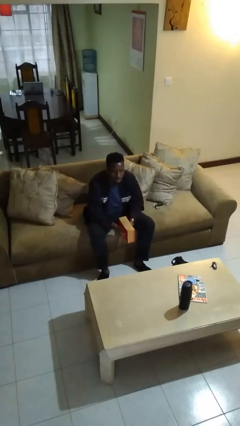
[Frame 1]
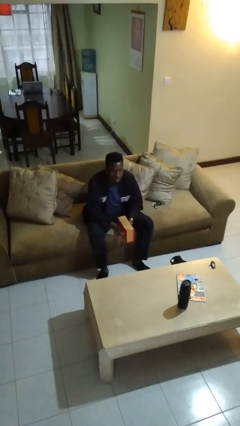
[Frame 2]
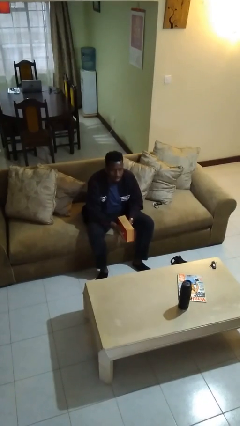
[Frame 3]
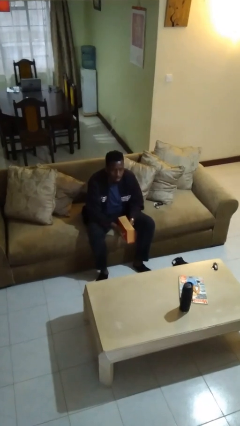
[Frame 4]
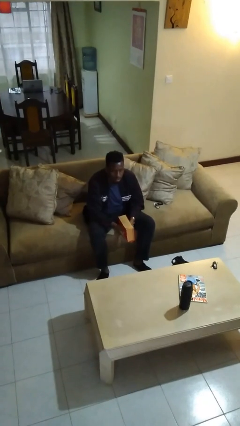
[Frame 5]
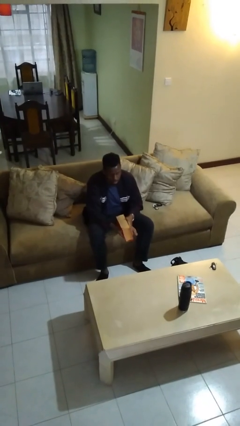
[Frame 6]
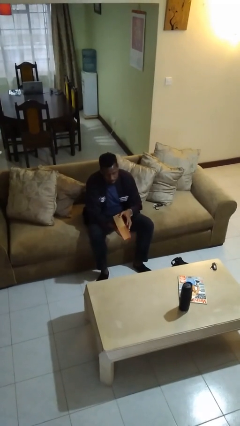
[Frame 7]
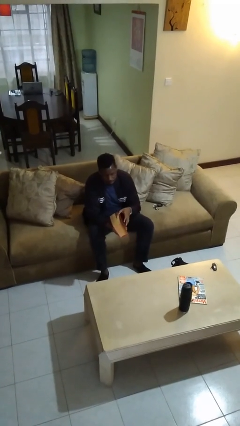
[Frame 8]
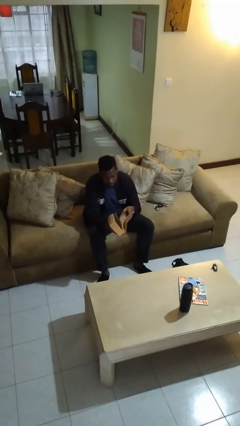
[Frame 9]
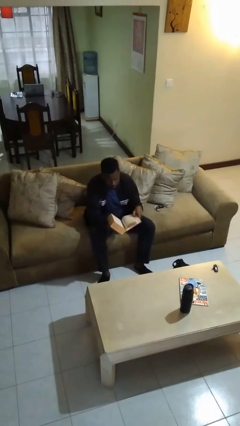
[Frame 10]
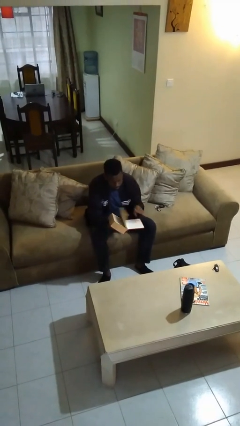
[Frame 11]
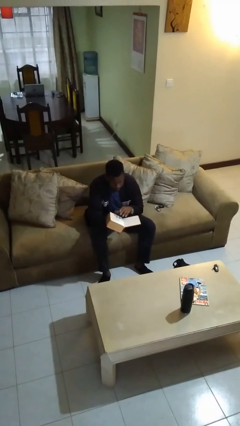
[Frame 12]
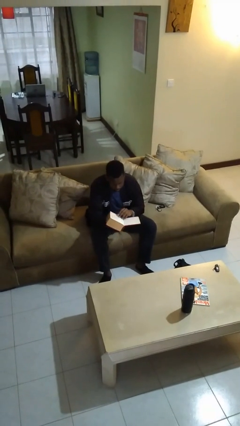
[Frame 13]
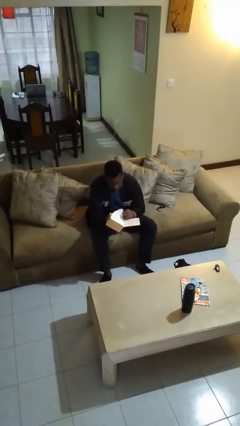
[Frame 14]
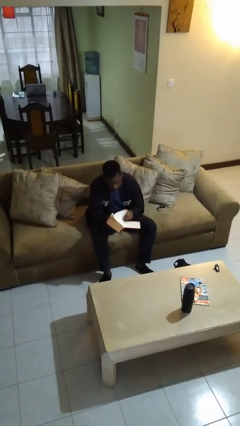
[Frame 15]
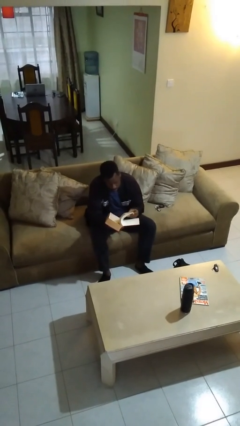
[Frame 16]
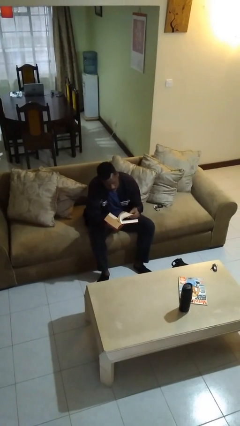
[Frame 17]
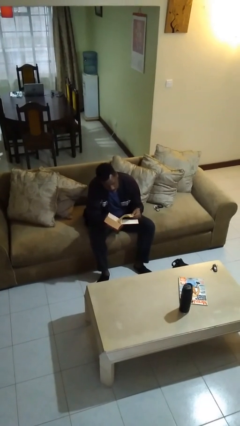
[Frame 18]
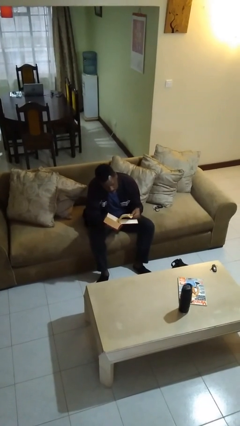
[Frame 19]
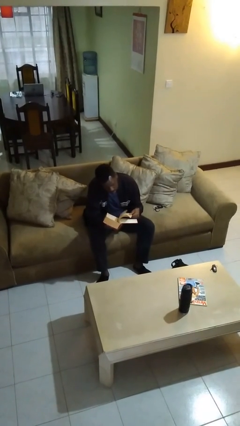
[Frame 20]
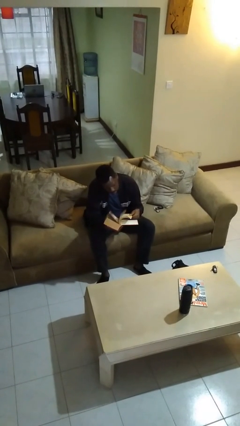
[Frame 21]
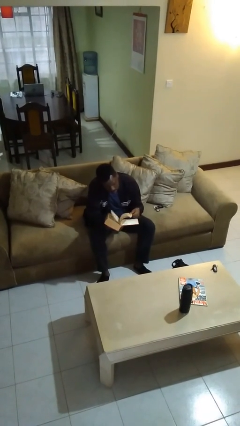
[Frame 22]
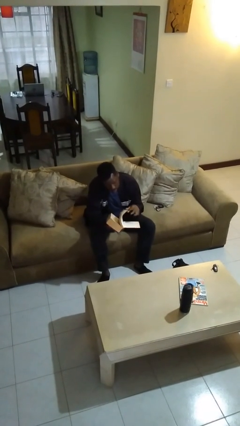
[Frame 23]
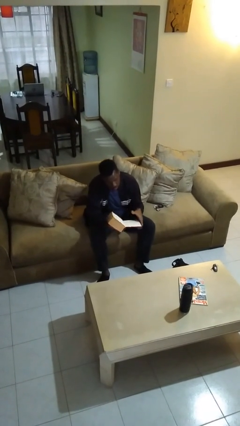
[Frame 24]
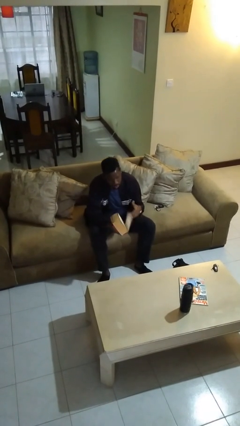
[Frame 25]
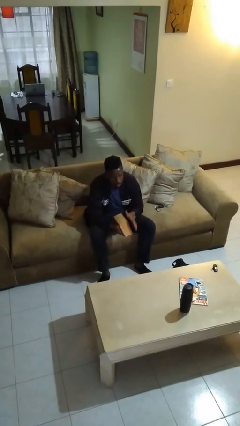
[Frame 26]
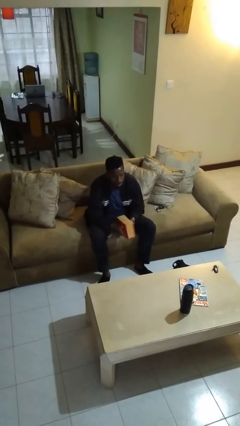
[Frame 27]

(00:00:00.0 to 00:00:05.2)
person reads book

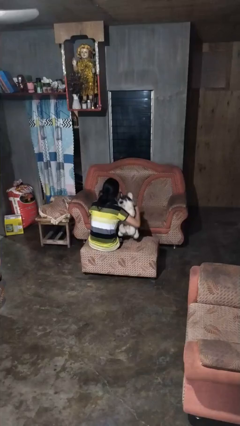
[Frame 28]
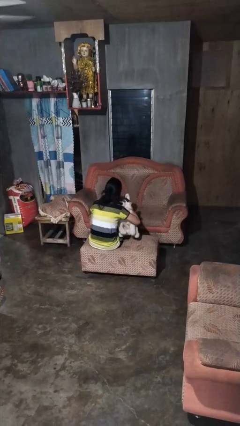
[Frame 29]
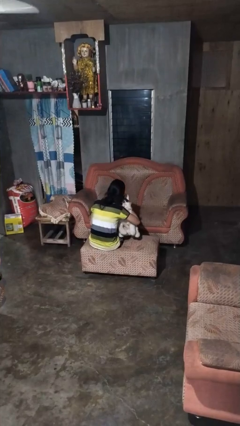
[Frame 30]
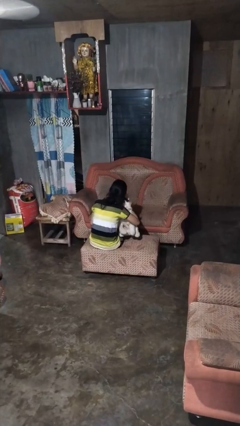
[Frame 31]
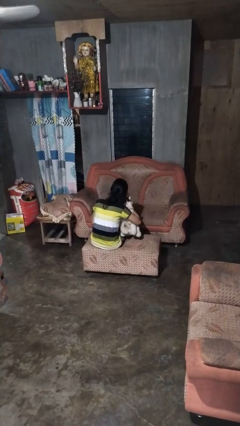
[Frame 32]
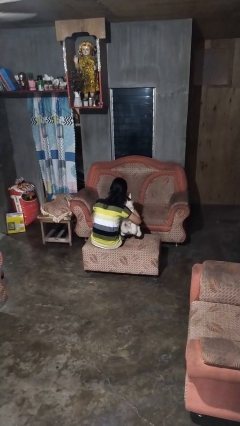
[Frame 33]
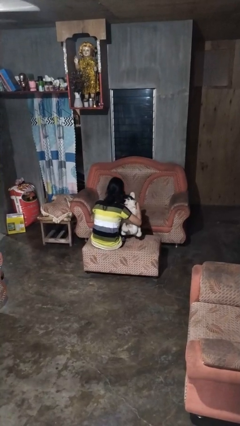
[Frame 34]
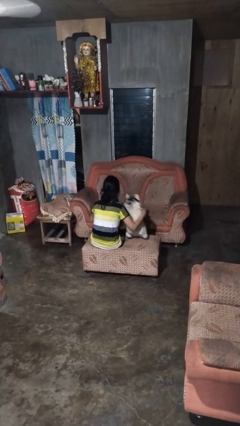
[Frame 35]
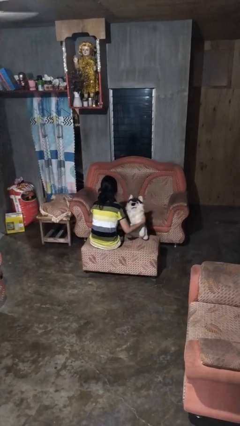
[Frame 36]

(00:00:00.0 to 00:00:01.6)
person hugs stuffed animal

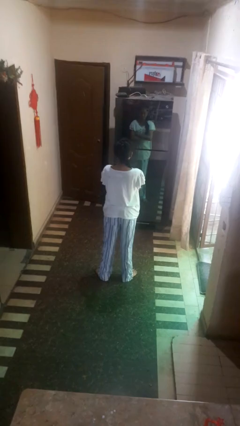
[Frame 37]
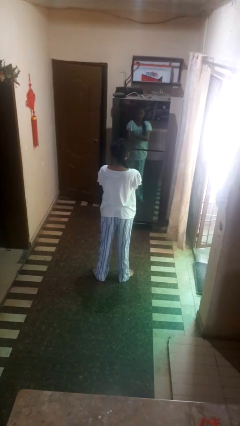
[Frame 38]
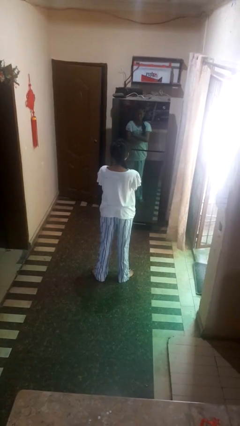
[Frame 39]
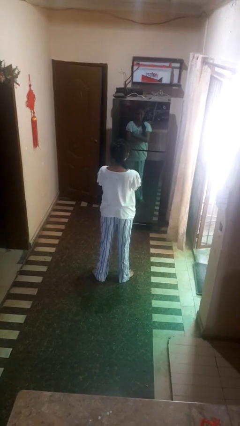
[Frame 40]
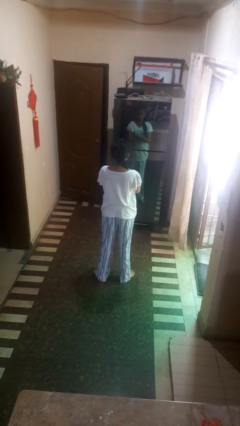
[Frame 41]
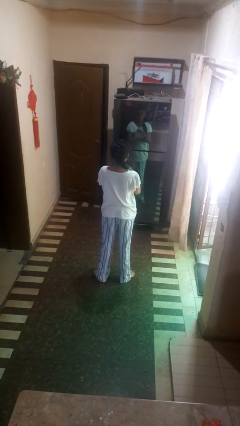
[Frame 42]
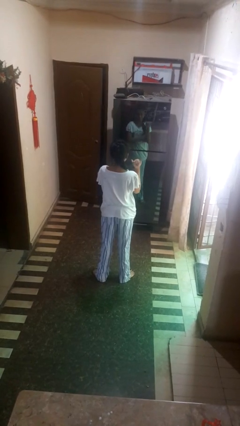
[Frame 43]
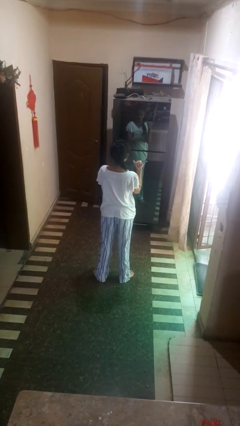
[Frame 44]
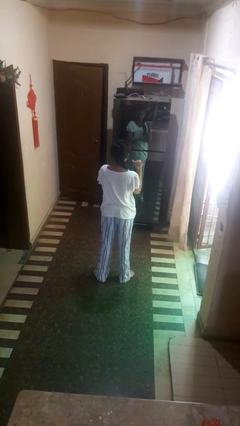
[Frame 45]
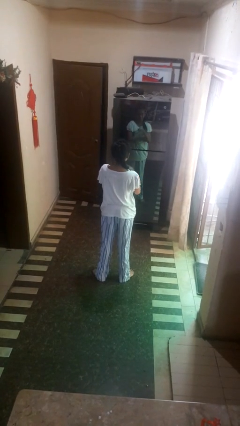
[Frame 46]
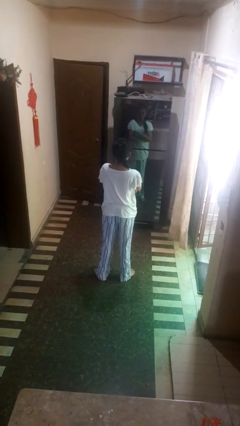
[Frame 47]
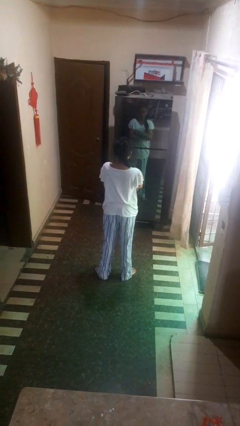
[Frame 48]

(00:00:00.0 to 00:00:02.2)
person gestures hang loose

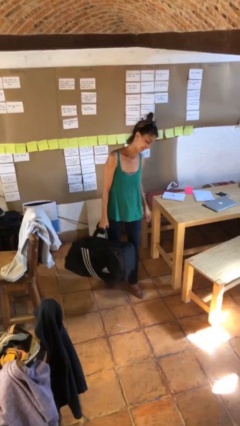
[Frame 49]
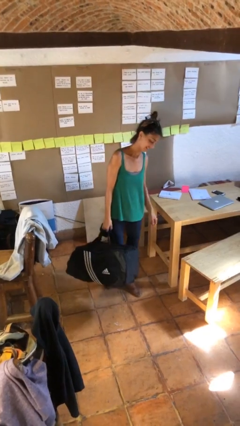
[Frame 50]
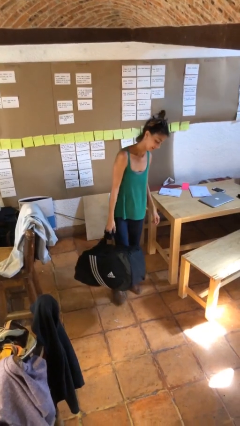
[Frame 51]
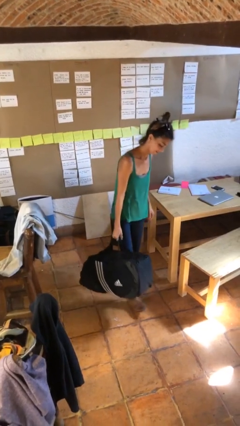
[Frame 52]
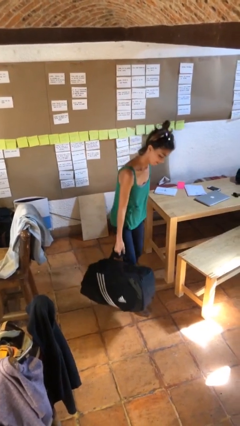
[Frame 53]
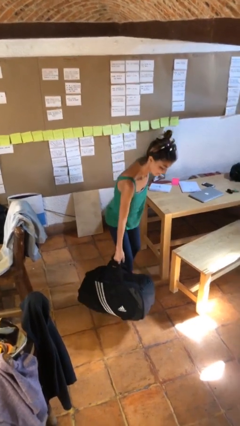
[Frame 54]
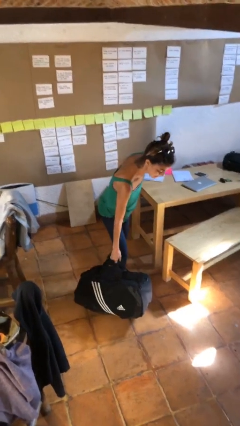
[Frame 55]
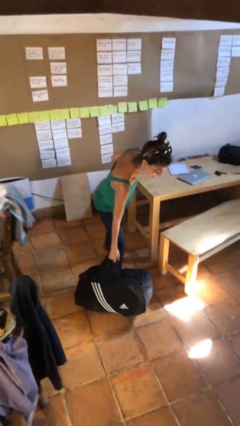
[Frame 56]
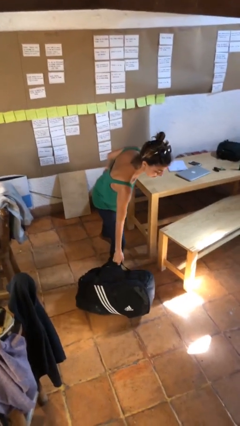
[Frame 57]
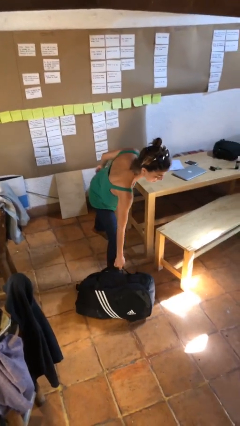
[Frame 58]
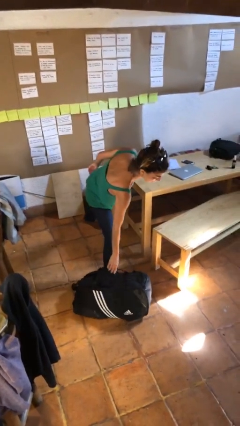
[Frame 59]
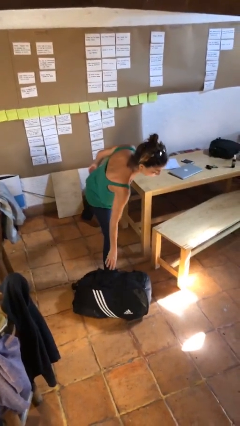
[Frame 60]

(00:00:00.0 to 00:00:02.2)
person puts down object on floor

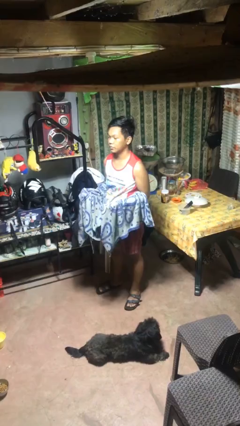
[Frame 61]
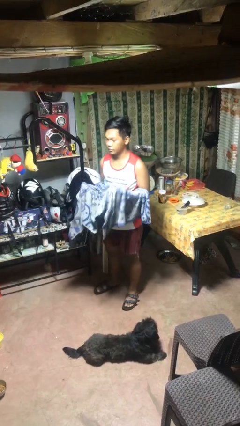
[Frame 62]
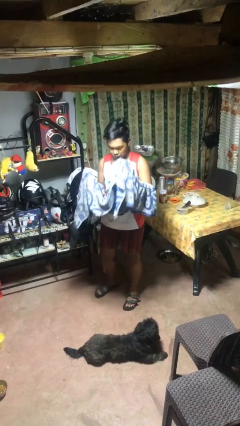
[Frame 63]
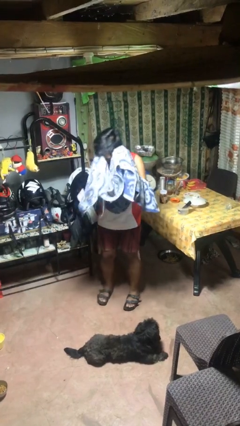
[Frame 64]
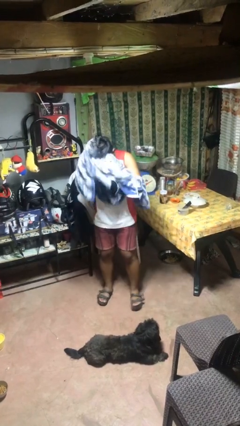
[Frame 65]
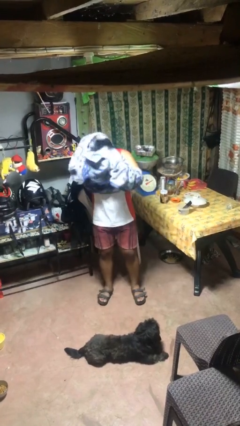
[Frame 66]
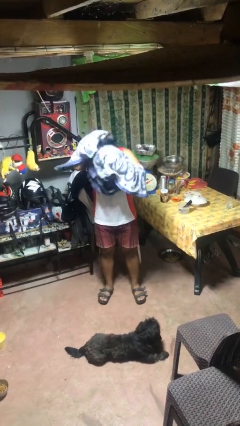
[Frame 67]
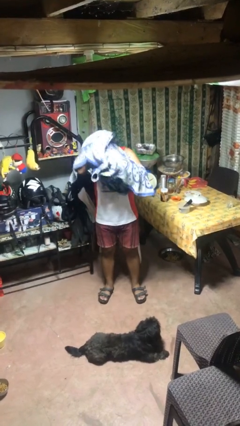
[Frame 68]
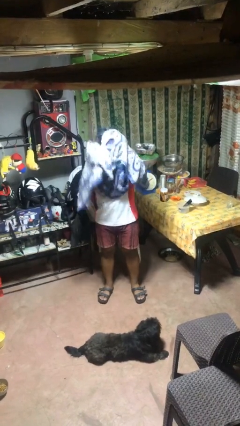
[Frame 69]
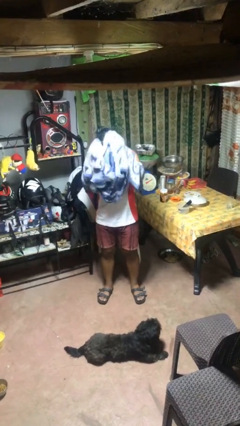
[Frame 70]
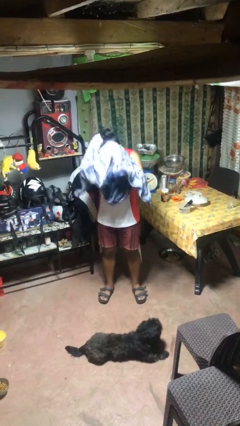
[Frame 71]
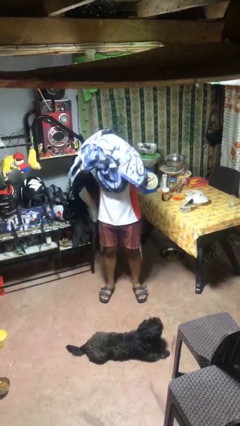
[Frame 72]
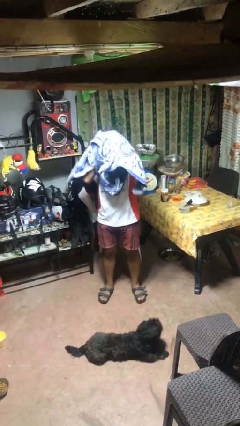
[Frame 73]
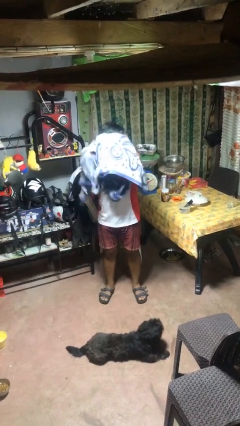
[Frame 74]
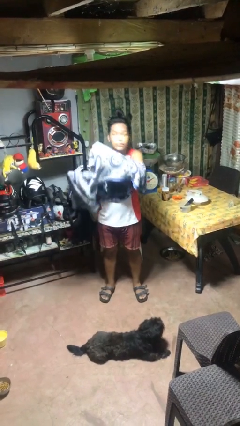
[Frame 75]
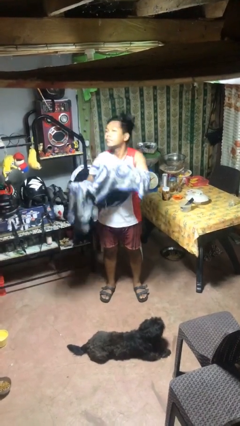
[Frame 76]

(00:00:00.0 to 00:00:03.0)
person dries hair with towel

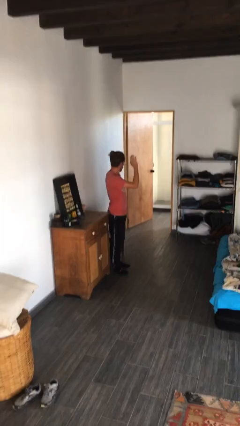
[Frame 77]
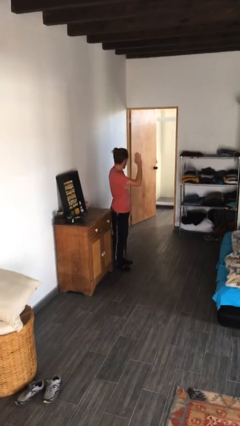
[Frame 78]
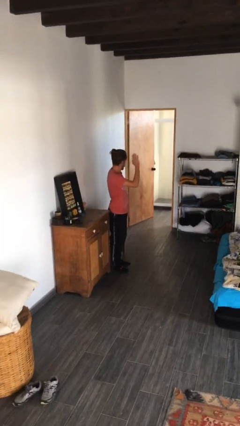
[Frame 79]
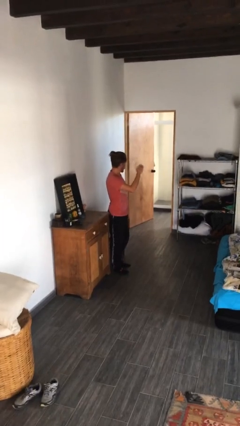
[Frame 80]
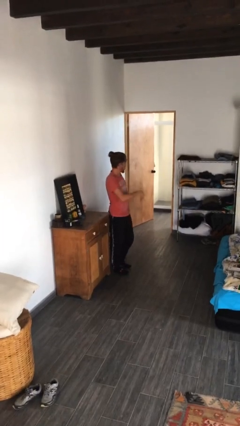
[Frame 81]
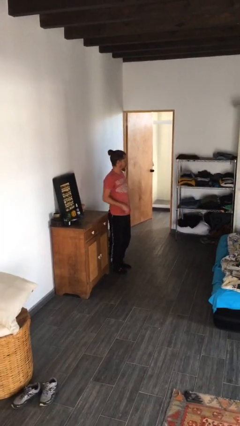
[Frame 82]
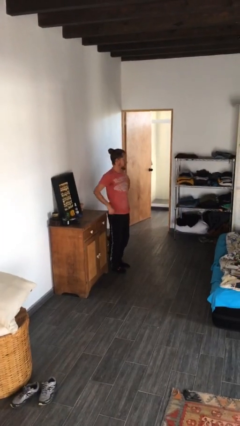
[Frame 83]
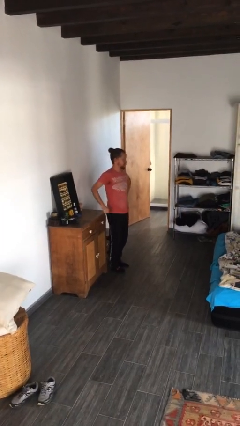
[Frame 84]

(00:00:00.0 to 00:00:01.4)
person gestures lower hand

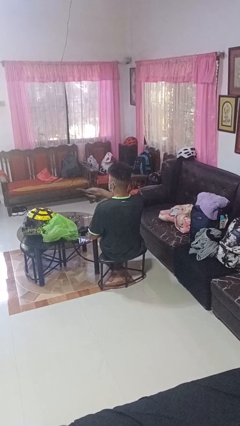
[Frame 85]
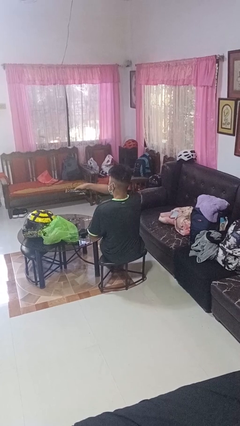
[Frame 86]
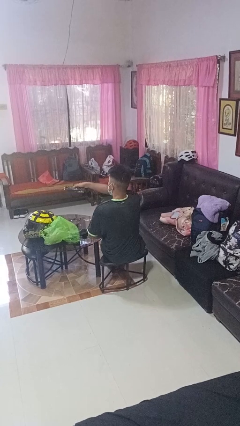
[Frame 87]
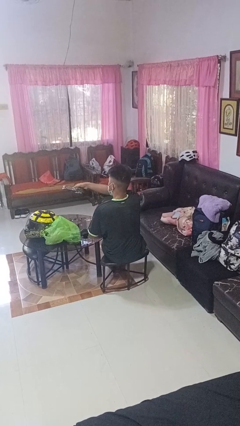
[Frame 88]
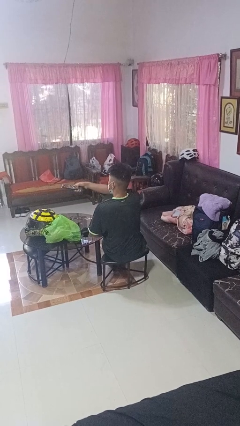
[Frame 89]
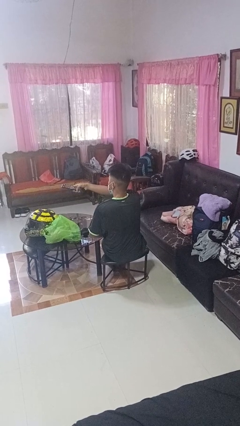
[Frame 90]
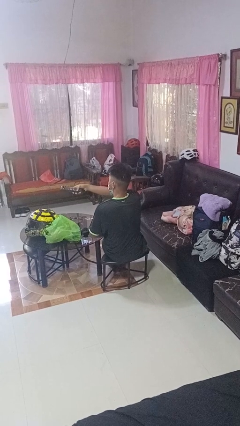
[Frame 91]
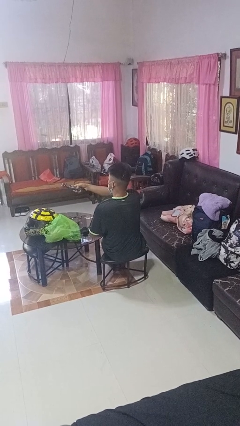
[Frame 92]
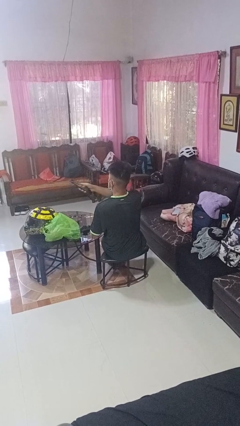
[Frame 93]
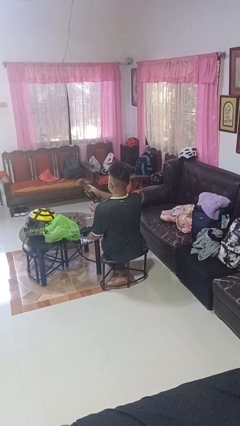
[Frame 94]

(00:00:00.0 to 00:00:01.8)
person uses television remote
